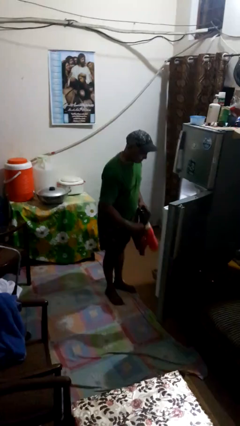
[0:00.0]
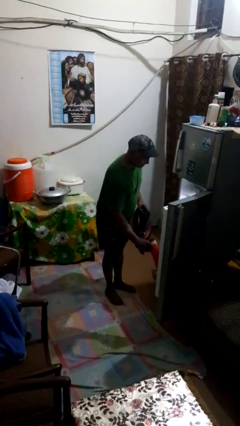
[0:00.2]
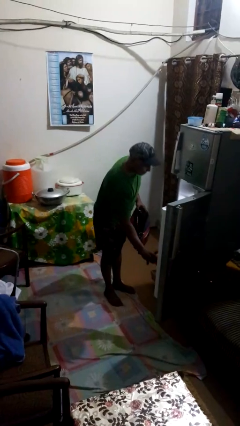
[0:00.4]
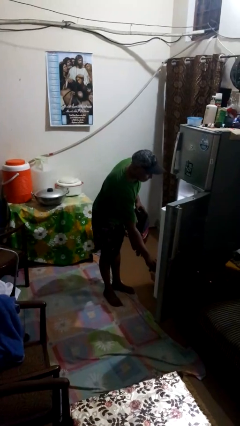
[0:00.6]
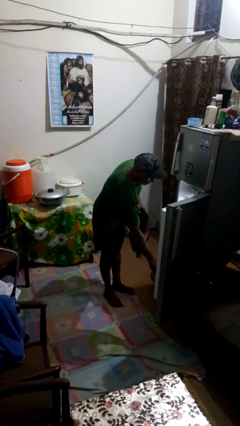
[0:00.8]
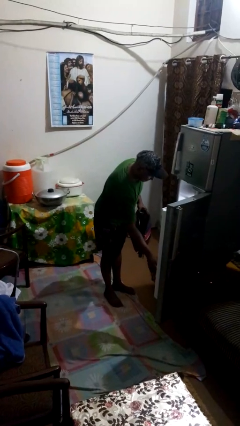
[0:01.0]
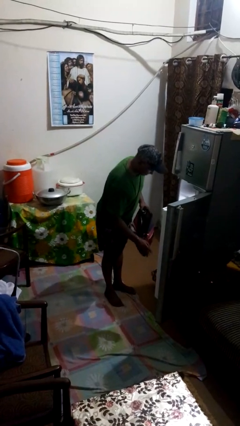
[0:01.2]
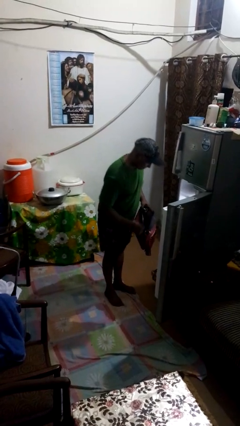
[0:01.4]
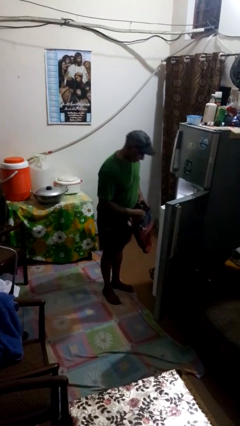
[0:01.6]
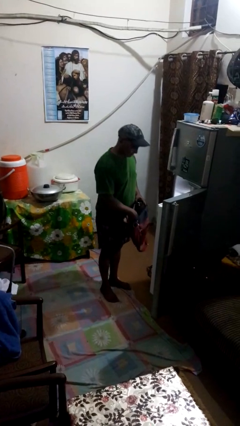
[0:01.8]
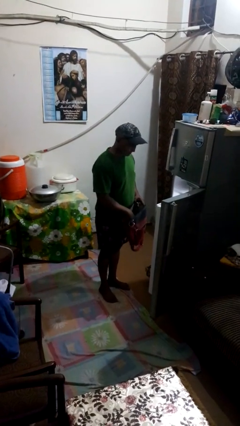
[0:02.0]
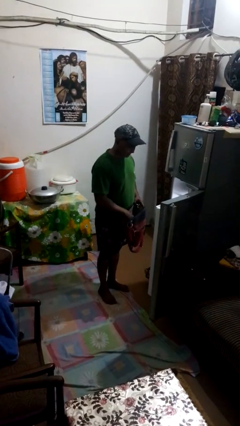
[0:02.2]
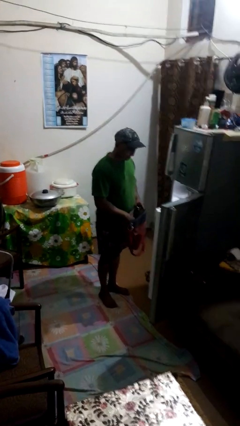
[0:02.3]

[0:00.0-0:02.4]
person loads groceries into refrigerator

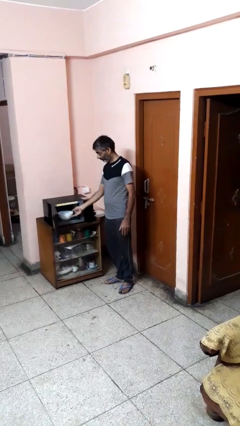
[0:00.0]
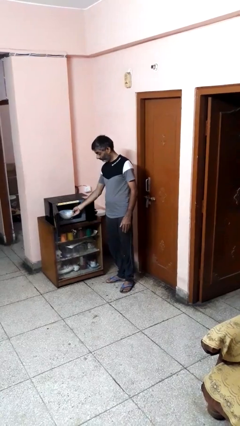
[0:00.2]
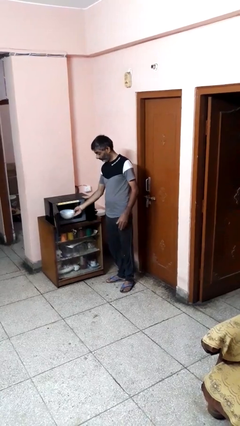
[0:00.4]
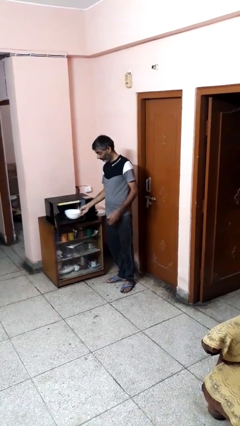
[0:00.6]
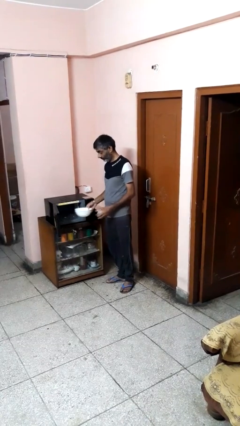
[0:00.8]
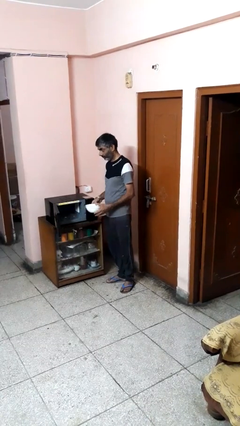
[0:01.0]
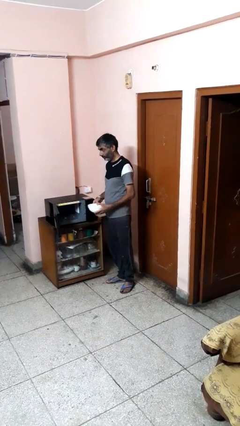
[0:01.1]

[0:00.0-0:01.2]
person takes object from microwave

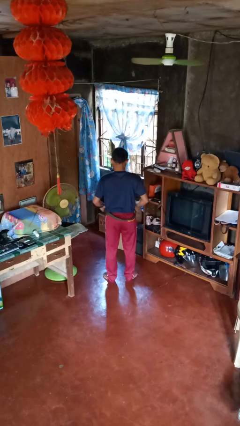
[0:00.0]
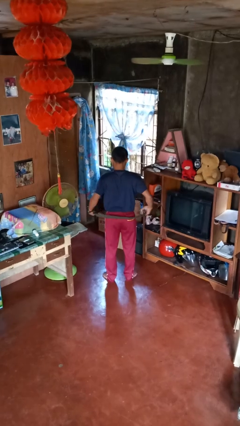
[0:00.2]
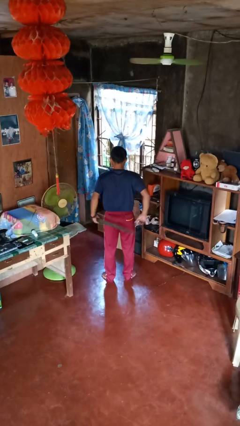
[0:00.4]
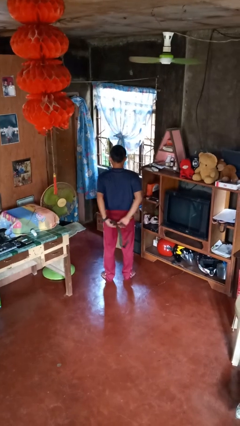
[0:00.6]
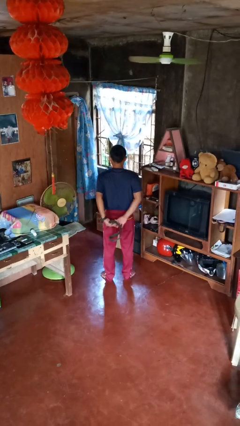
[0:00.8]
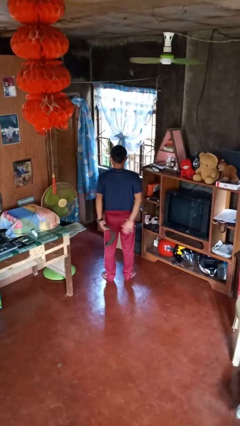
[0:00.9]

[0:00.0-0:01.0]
person takes off belt

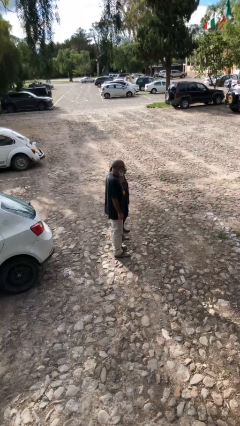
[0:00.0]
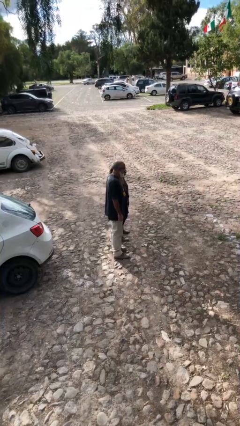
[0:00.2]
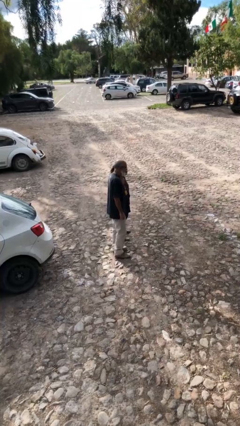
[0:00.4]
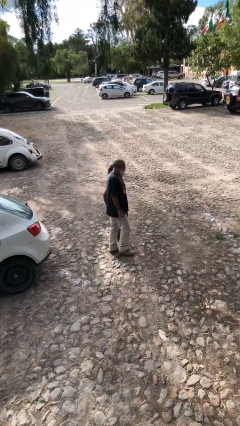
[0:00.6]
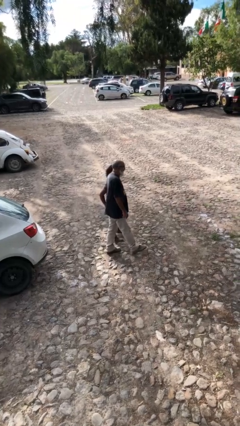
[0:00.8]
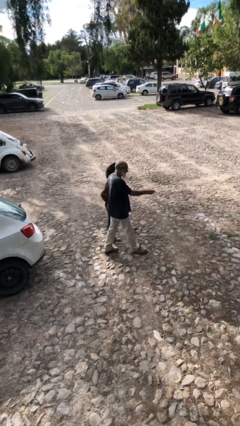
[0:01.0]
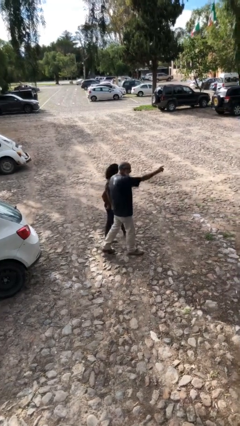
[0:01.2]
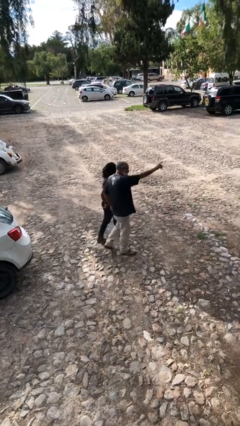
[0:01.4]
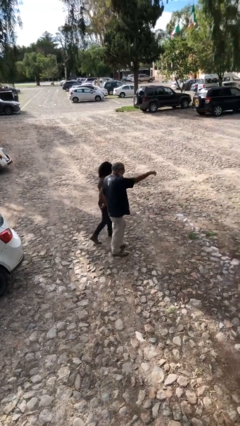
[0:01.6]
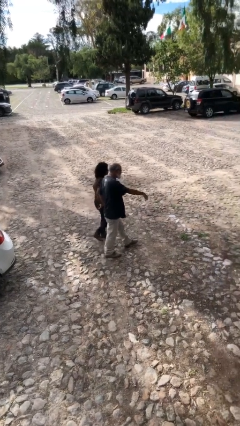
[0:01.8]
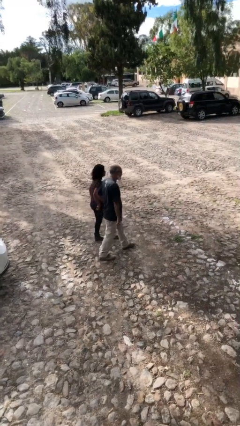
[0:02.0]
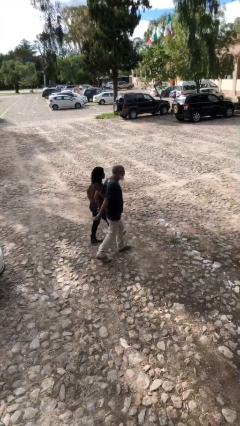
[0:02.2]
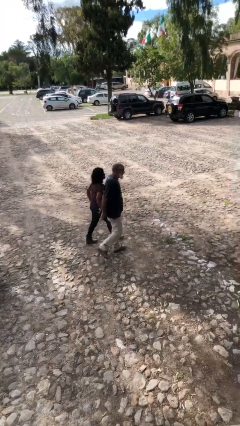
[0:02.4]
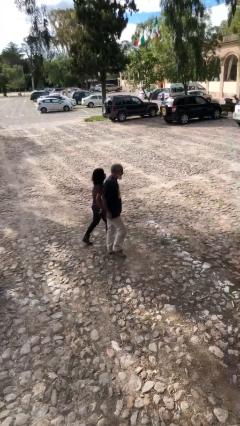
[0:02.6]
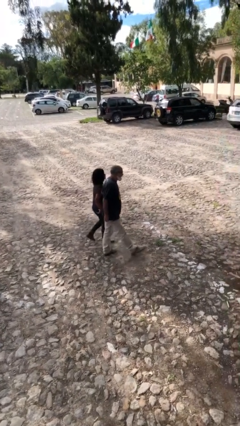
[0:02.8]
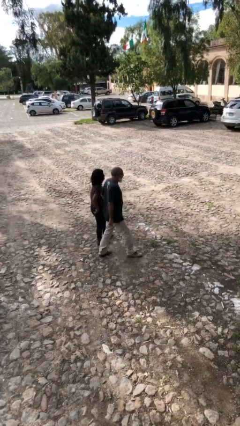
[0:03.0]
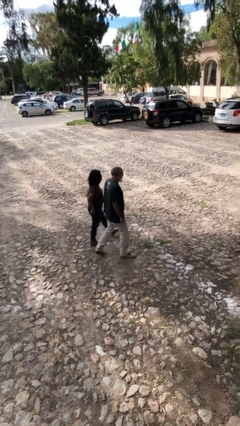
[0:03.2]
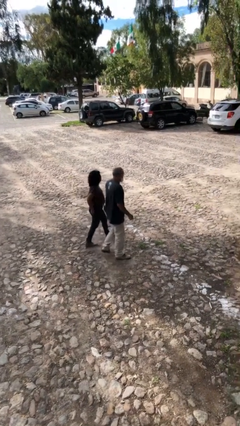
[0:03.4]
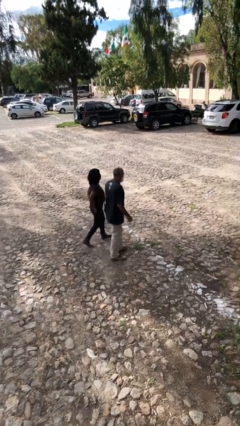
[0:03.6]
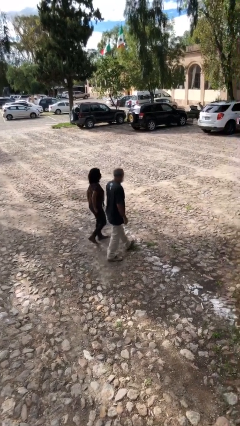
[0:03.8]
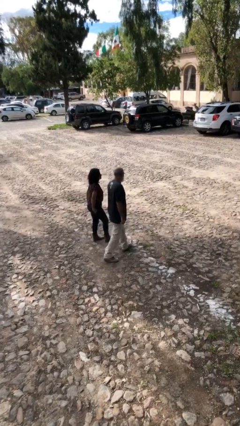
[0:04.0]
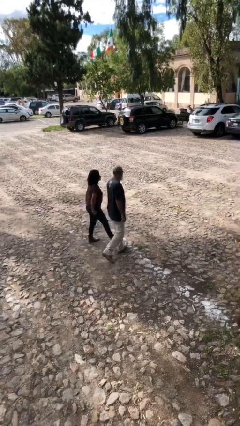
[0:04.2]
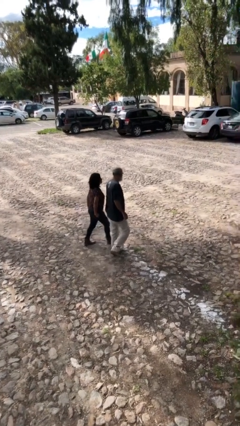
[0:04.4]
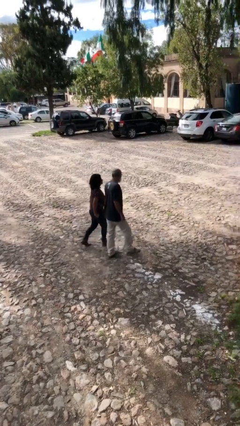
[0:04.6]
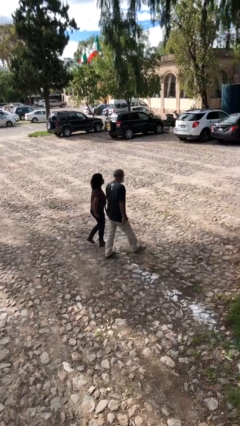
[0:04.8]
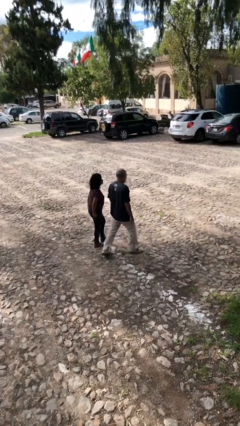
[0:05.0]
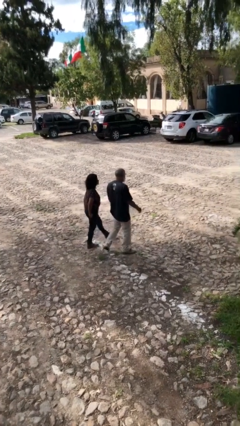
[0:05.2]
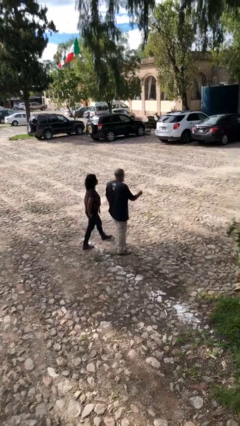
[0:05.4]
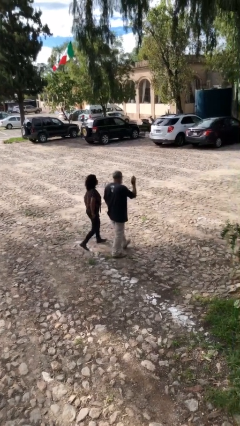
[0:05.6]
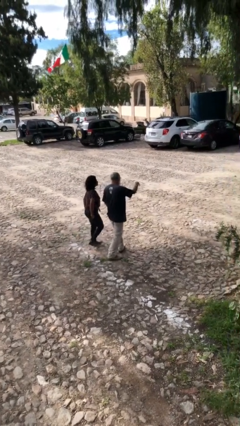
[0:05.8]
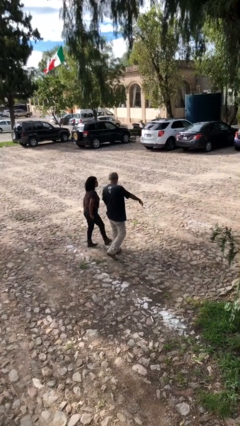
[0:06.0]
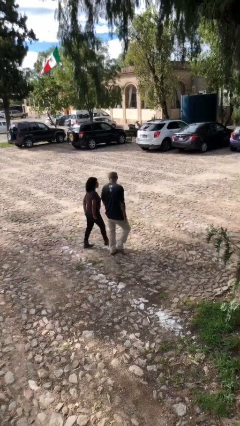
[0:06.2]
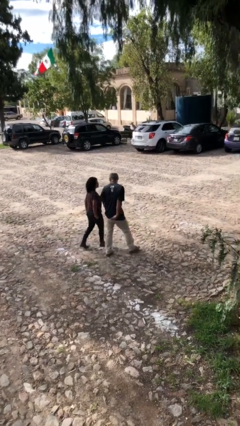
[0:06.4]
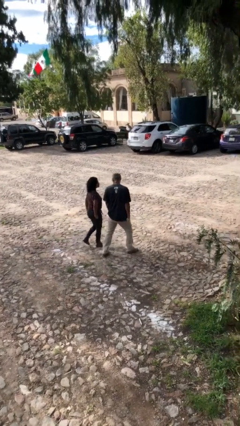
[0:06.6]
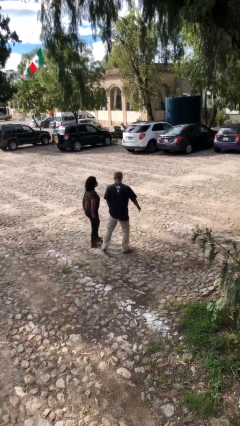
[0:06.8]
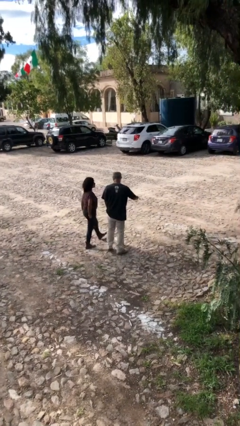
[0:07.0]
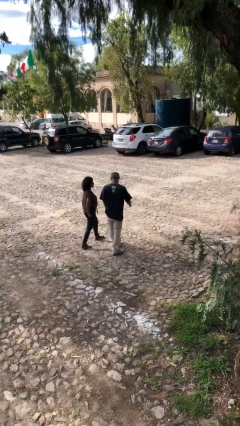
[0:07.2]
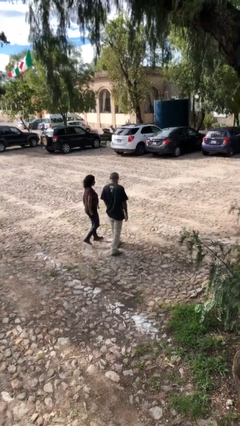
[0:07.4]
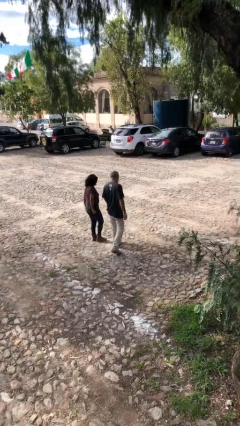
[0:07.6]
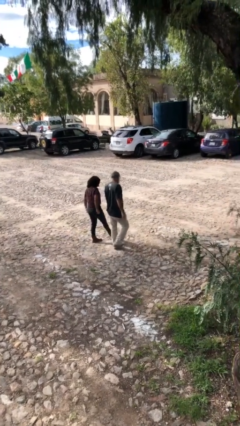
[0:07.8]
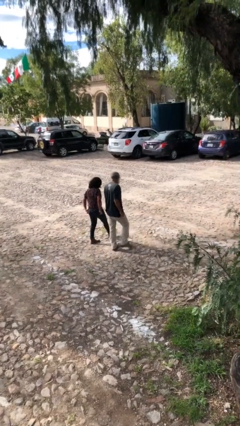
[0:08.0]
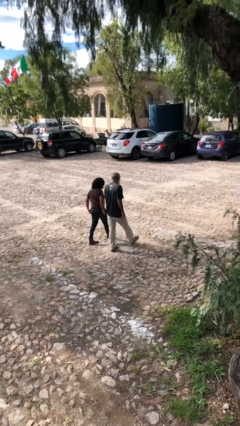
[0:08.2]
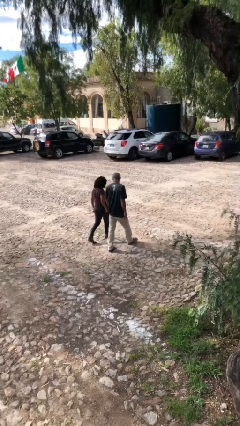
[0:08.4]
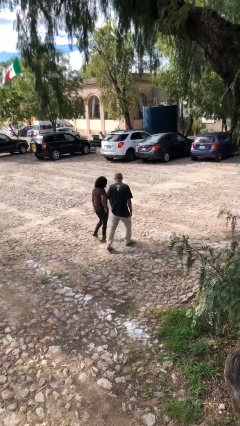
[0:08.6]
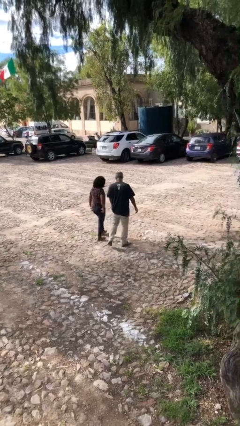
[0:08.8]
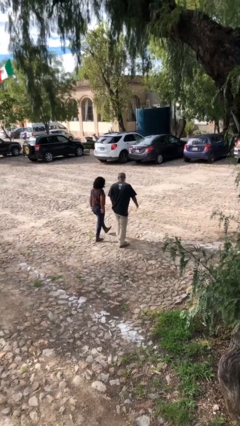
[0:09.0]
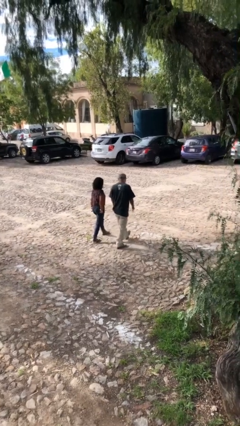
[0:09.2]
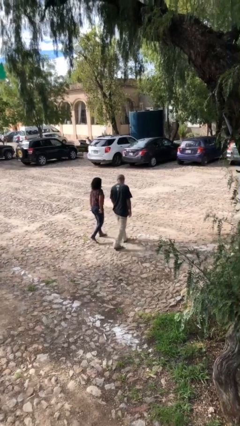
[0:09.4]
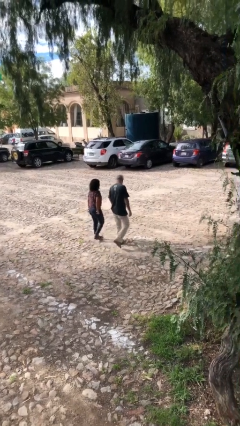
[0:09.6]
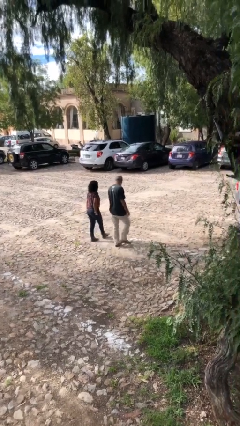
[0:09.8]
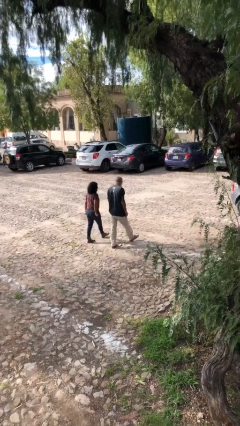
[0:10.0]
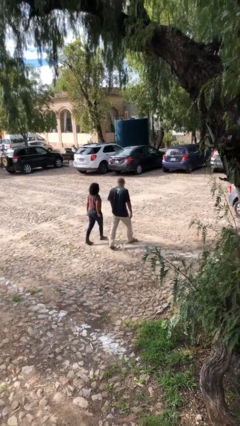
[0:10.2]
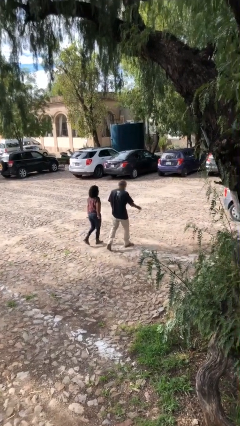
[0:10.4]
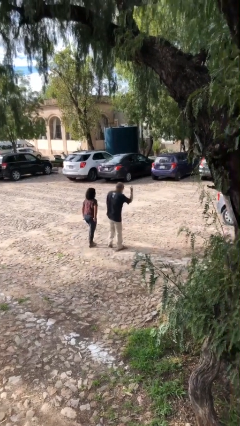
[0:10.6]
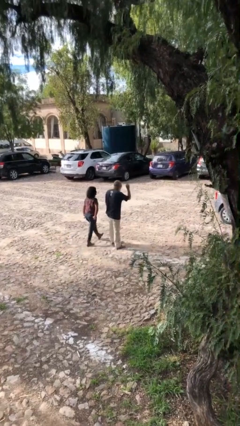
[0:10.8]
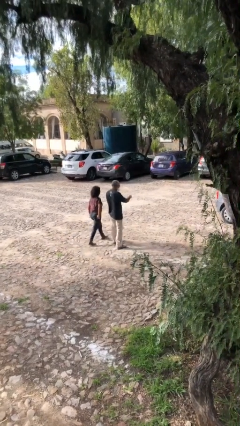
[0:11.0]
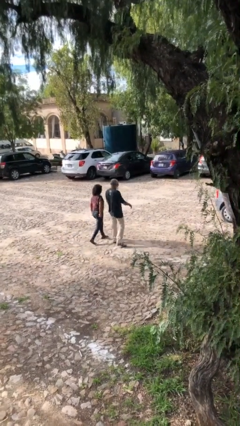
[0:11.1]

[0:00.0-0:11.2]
person talks to person

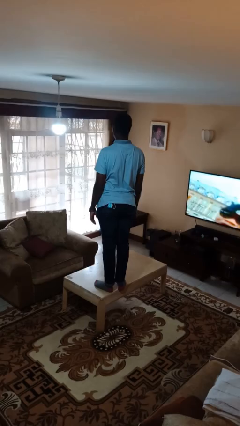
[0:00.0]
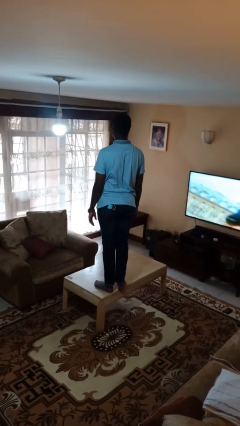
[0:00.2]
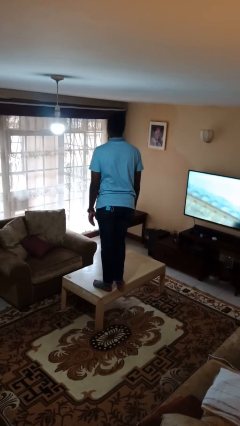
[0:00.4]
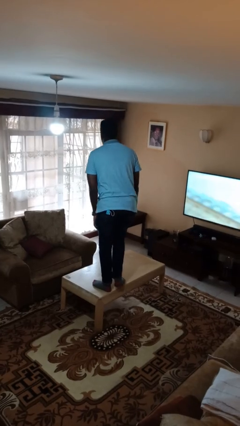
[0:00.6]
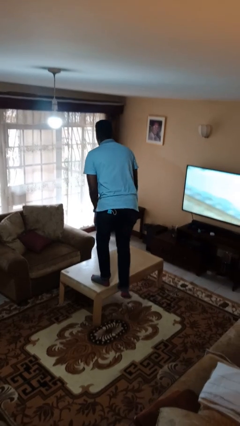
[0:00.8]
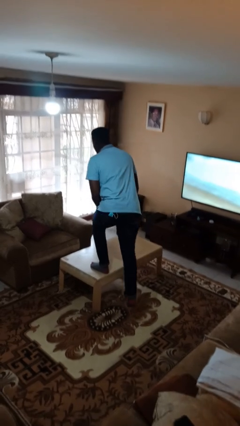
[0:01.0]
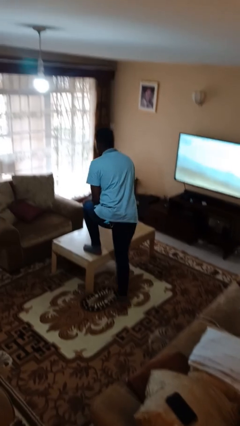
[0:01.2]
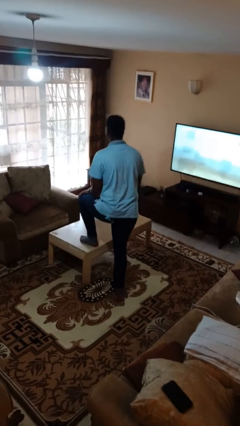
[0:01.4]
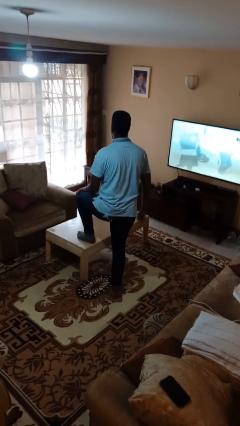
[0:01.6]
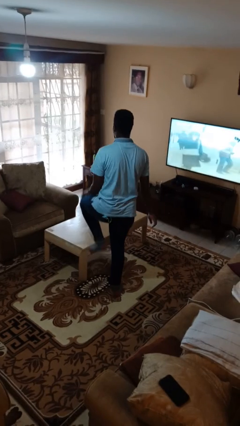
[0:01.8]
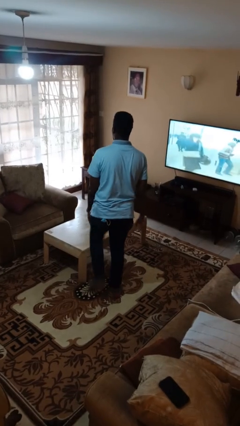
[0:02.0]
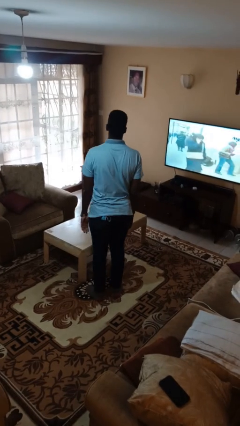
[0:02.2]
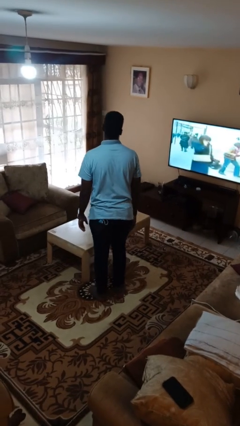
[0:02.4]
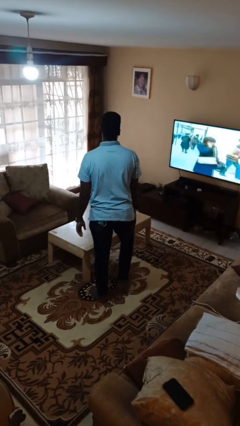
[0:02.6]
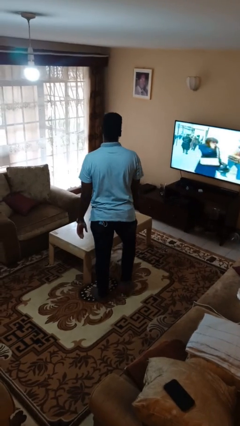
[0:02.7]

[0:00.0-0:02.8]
person climbs off table
